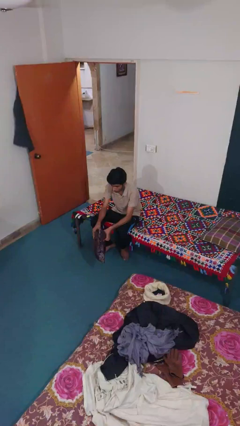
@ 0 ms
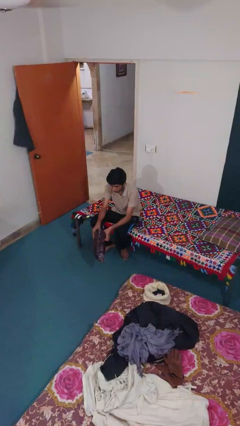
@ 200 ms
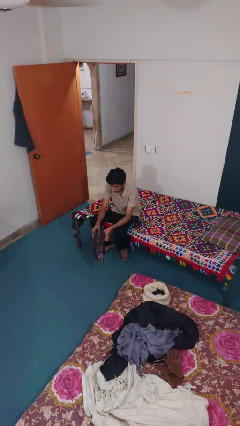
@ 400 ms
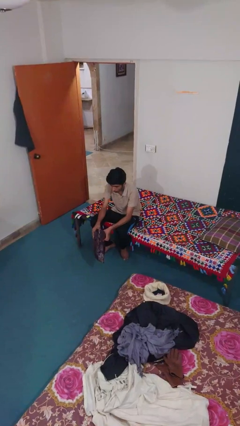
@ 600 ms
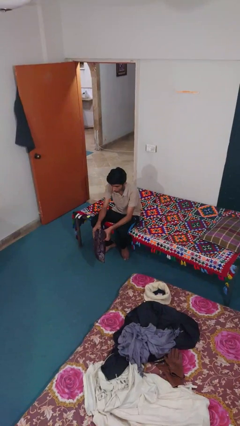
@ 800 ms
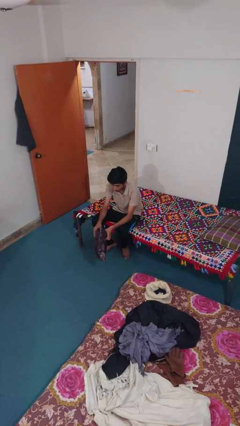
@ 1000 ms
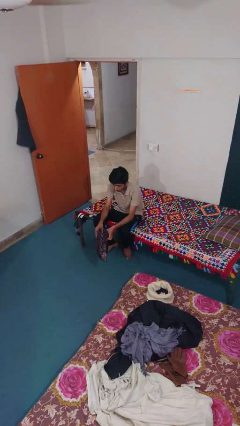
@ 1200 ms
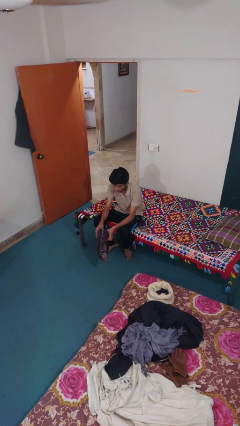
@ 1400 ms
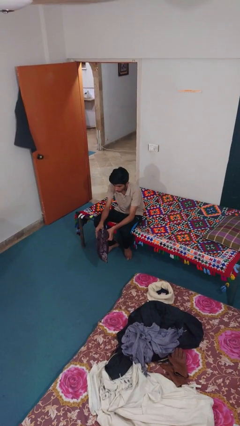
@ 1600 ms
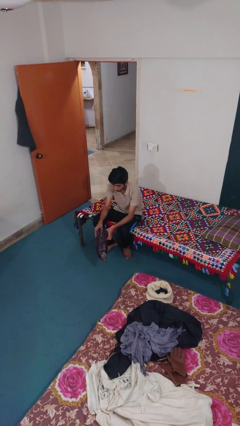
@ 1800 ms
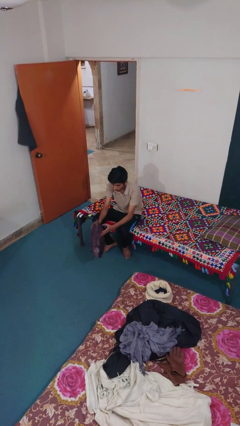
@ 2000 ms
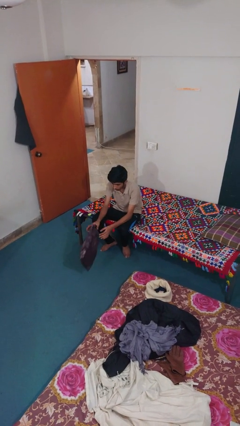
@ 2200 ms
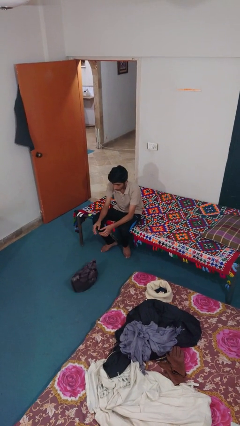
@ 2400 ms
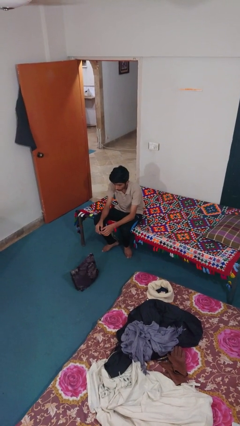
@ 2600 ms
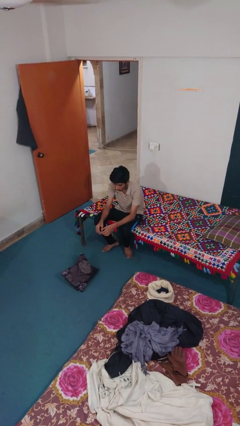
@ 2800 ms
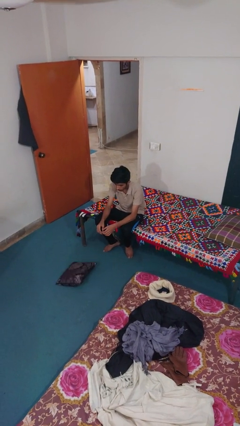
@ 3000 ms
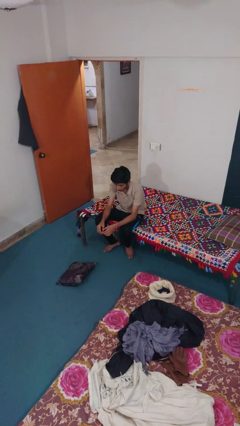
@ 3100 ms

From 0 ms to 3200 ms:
person drops object

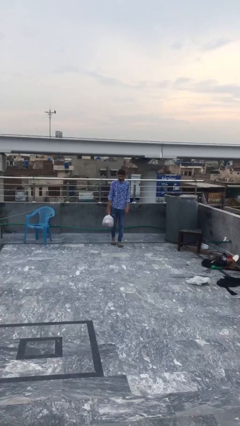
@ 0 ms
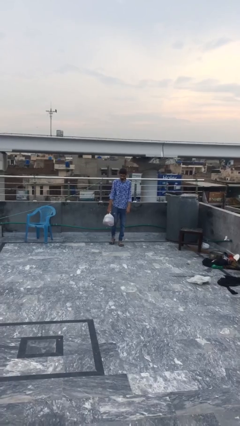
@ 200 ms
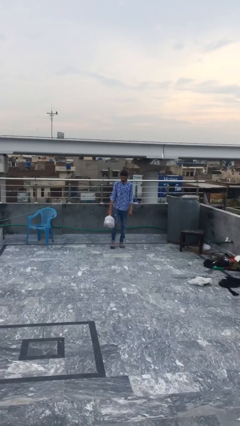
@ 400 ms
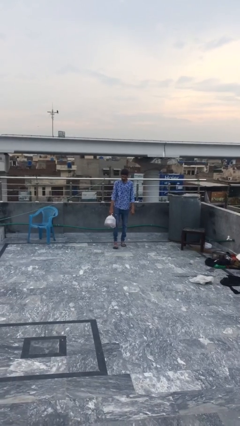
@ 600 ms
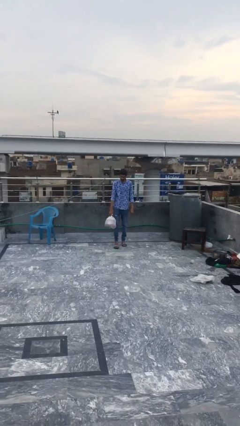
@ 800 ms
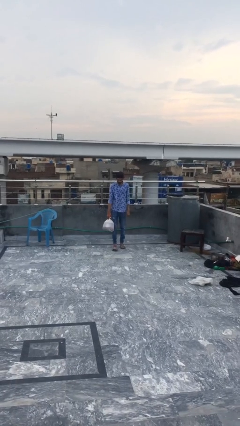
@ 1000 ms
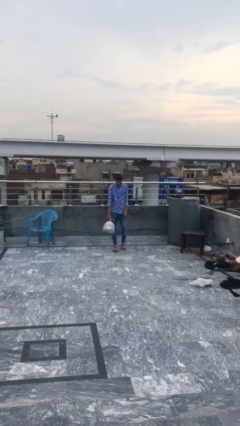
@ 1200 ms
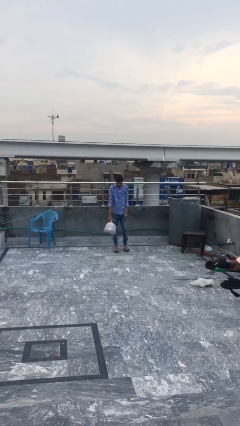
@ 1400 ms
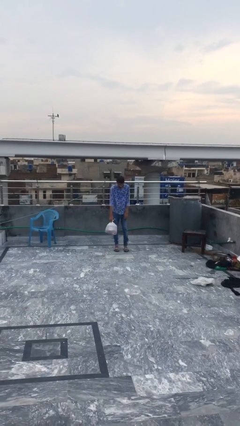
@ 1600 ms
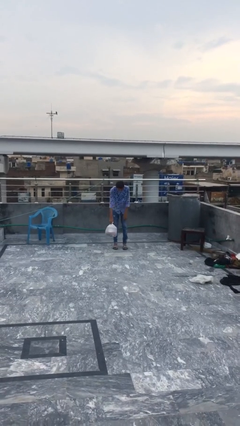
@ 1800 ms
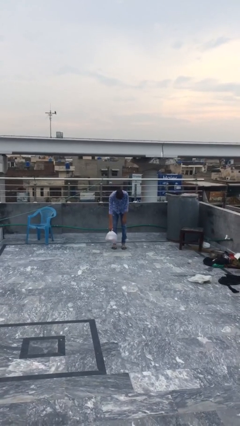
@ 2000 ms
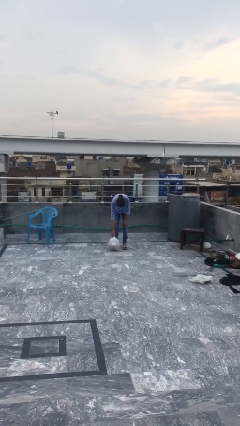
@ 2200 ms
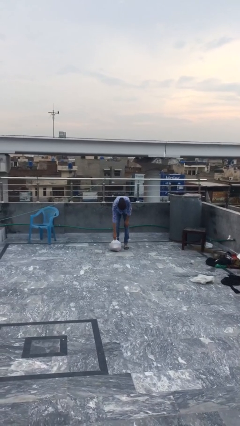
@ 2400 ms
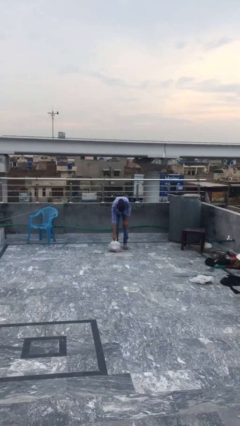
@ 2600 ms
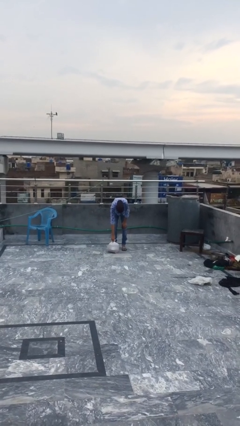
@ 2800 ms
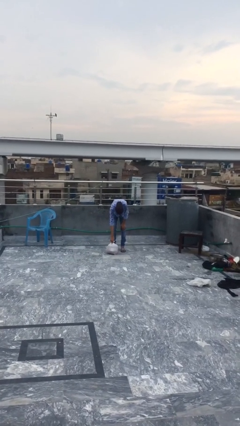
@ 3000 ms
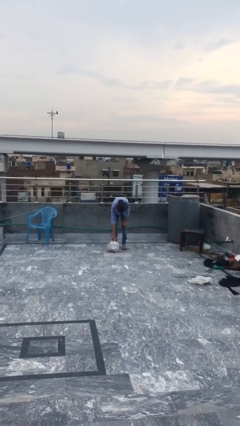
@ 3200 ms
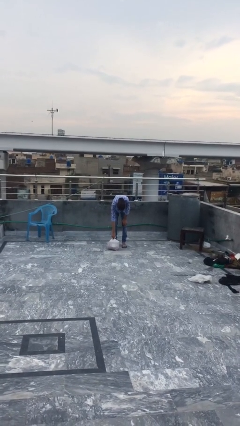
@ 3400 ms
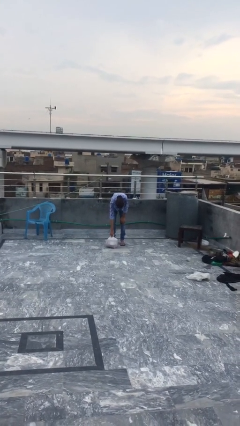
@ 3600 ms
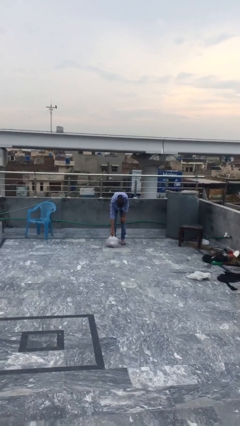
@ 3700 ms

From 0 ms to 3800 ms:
person puts down object on floor

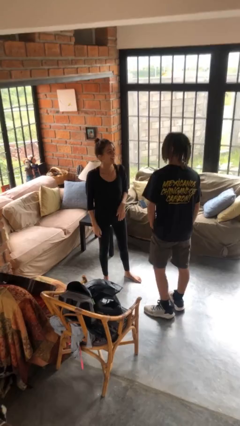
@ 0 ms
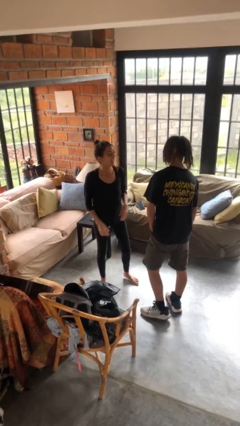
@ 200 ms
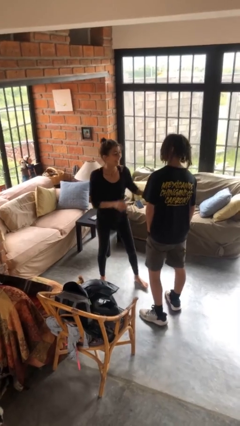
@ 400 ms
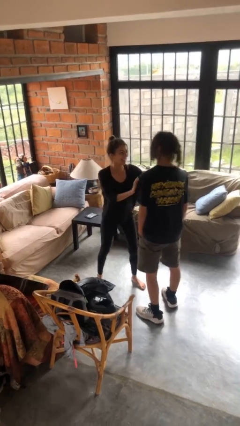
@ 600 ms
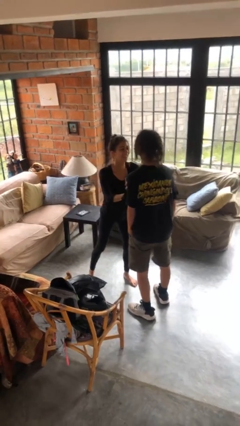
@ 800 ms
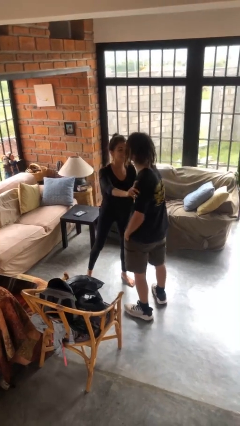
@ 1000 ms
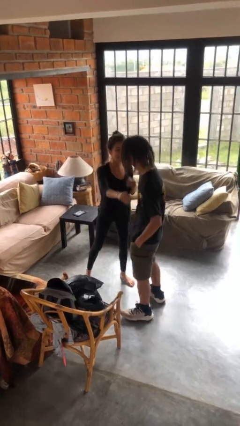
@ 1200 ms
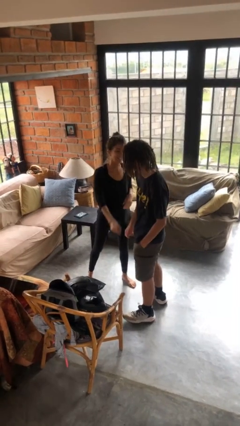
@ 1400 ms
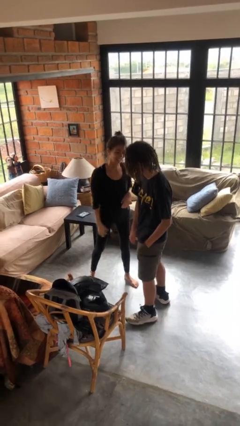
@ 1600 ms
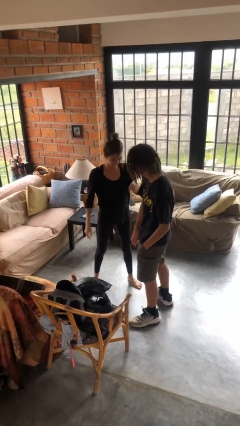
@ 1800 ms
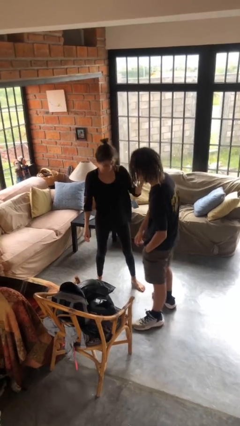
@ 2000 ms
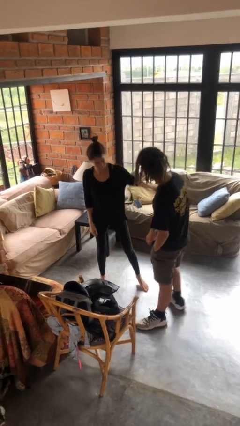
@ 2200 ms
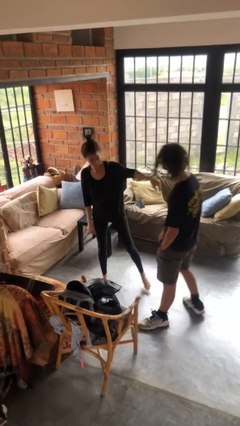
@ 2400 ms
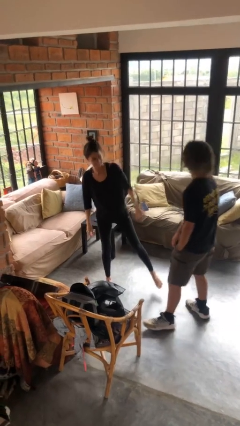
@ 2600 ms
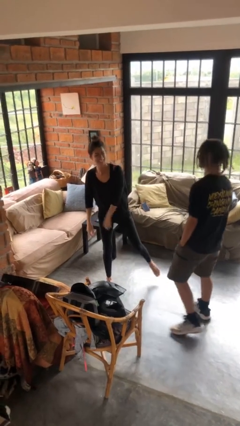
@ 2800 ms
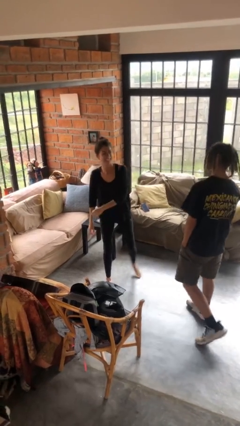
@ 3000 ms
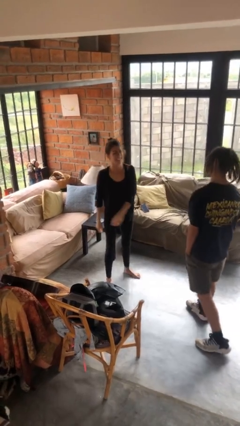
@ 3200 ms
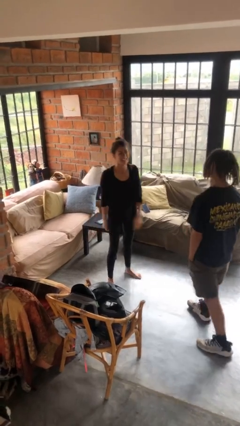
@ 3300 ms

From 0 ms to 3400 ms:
person shoves person

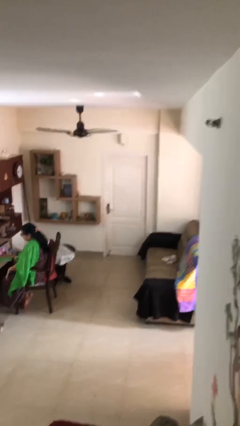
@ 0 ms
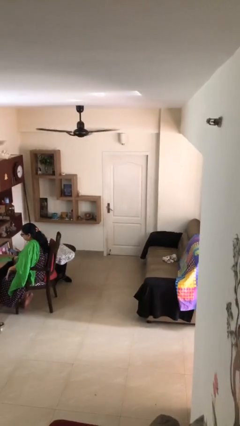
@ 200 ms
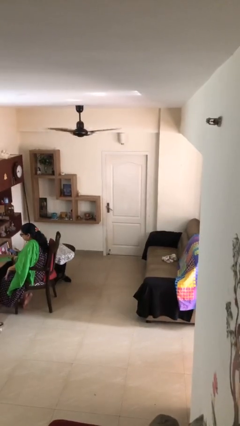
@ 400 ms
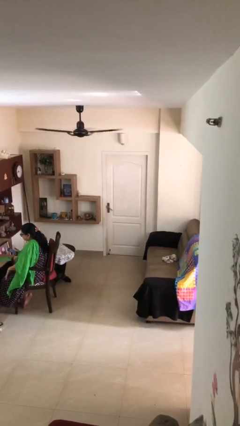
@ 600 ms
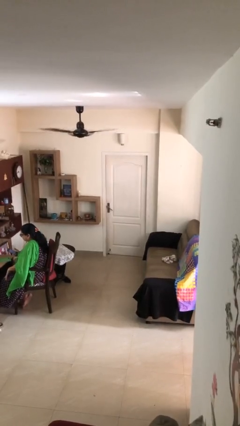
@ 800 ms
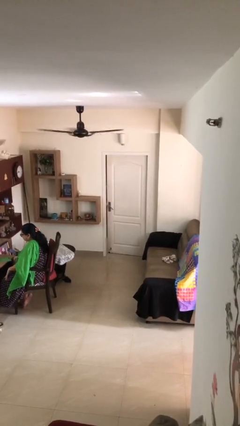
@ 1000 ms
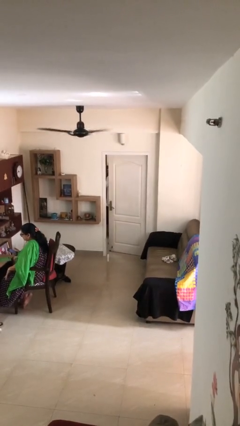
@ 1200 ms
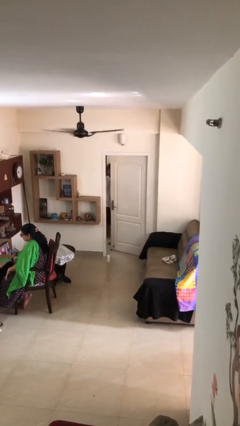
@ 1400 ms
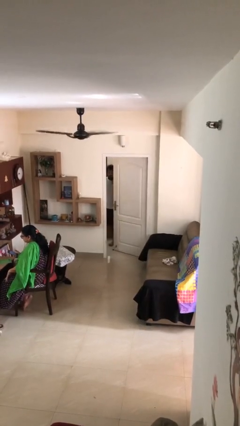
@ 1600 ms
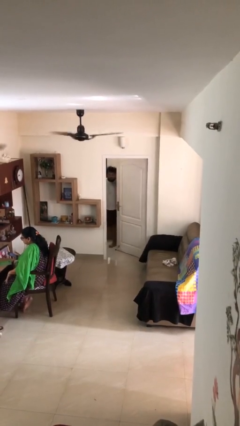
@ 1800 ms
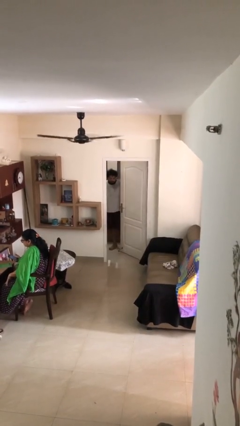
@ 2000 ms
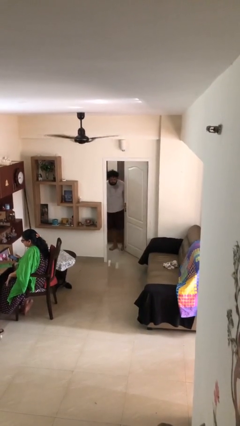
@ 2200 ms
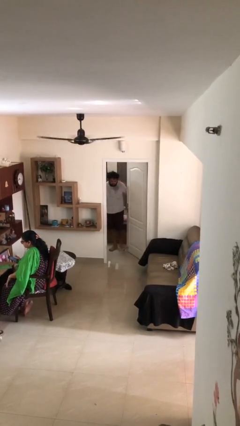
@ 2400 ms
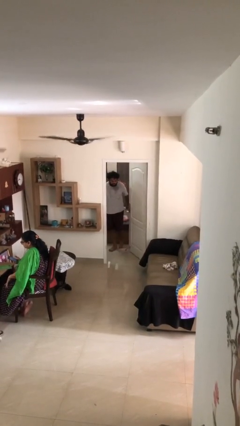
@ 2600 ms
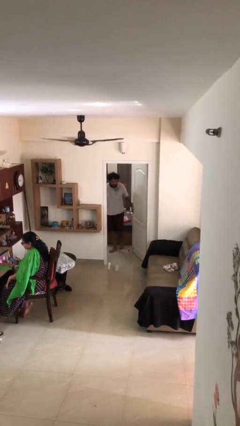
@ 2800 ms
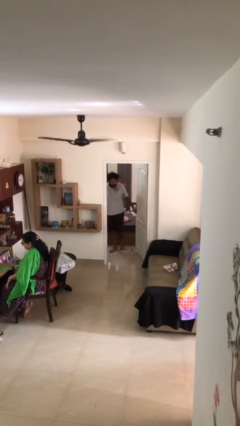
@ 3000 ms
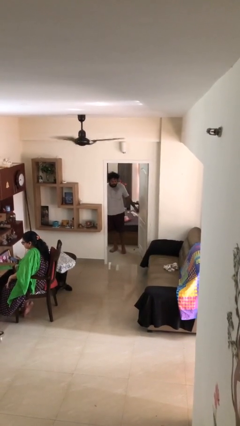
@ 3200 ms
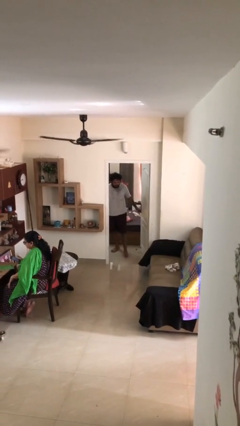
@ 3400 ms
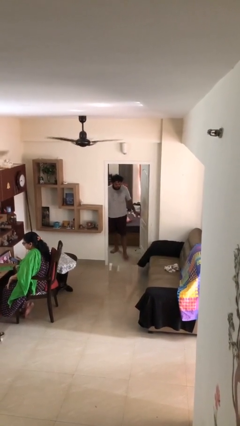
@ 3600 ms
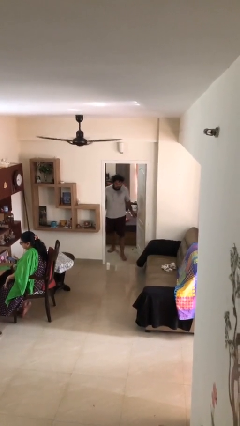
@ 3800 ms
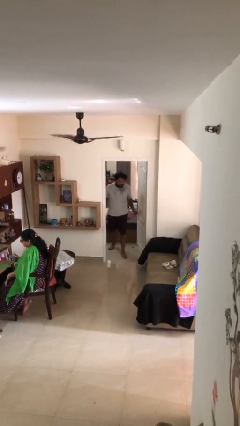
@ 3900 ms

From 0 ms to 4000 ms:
person opens facility door

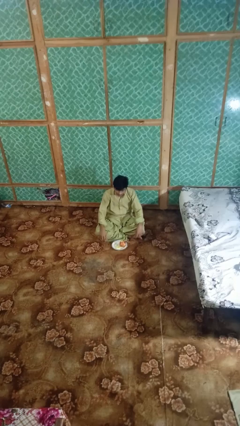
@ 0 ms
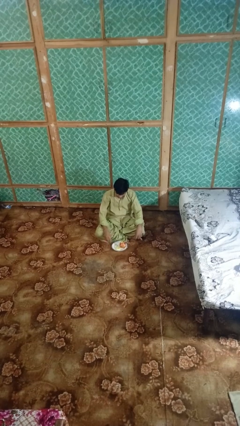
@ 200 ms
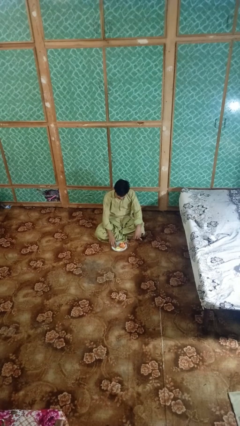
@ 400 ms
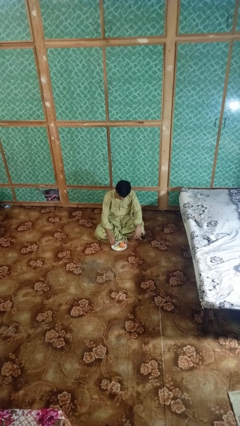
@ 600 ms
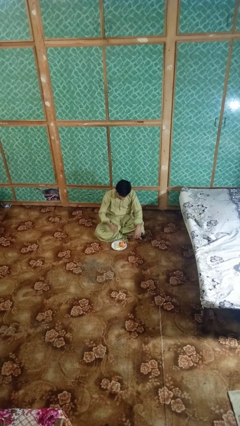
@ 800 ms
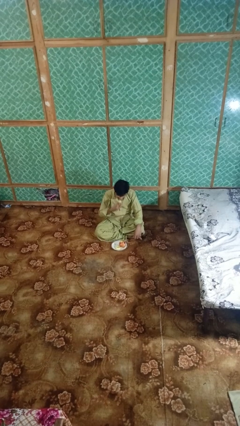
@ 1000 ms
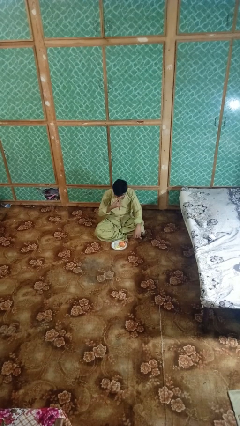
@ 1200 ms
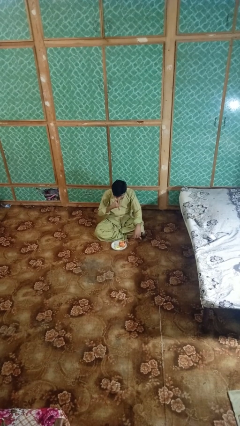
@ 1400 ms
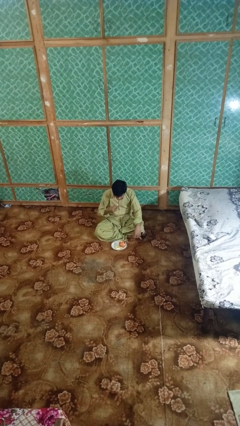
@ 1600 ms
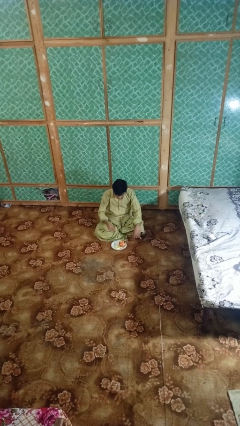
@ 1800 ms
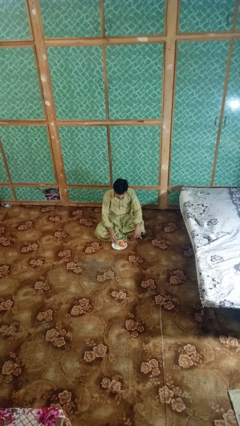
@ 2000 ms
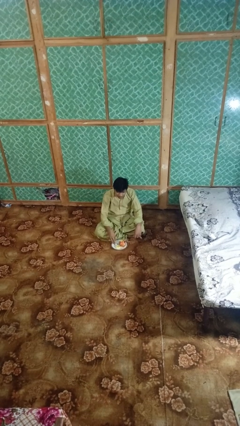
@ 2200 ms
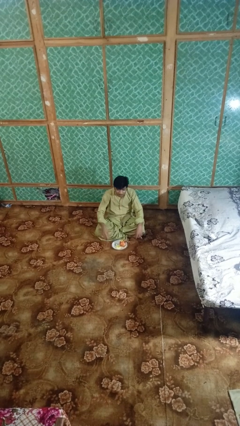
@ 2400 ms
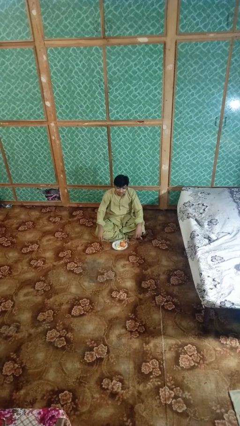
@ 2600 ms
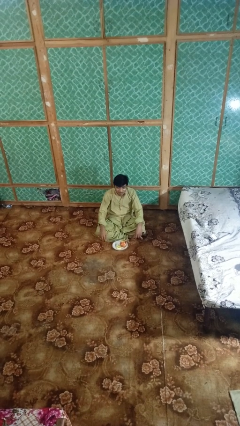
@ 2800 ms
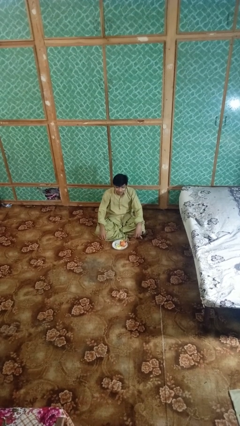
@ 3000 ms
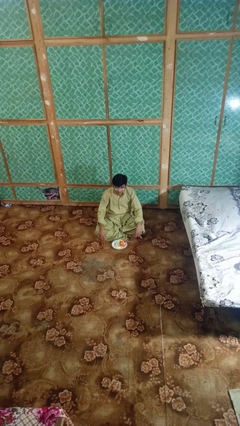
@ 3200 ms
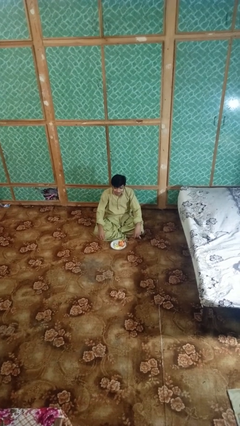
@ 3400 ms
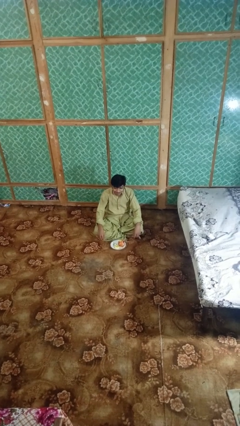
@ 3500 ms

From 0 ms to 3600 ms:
person eats apple
